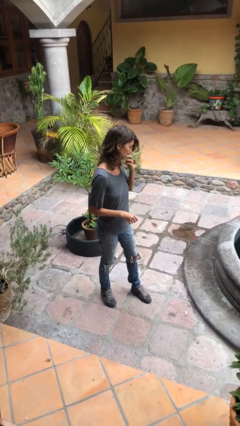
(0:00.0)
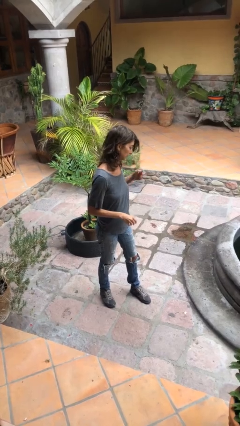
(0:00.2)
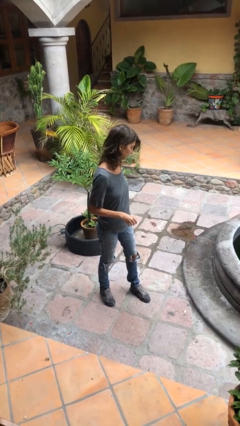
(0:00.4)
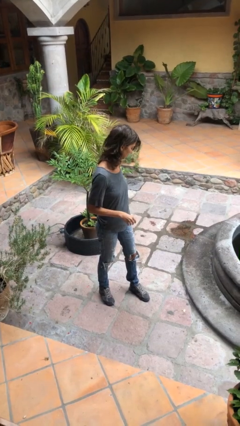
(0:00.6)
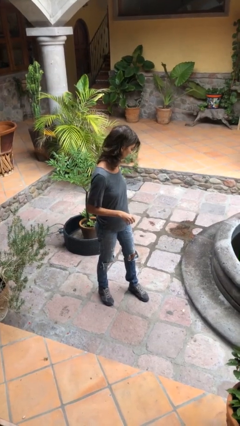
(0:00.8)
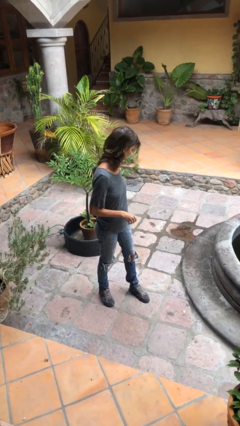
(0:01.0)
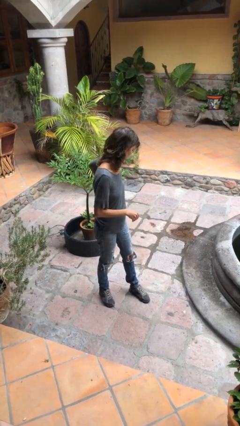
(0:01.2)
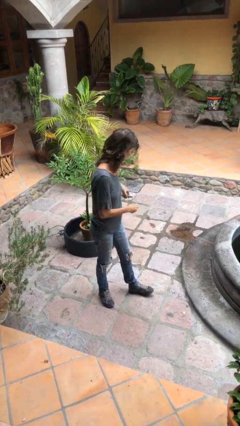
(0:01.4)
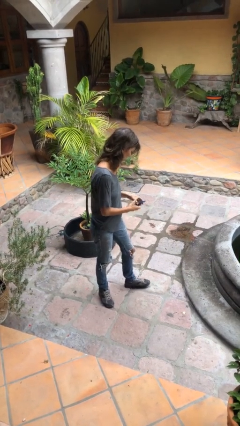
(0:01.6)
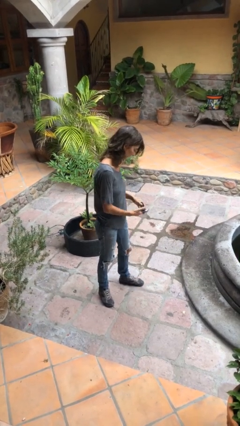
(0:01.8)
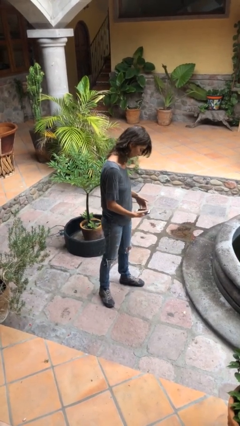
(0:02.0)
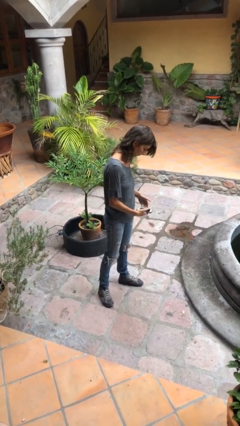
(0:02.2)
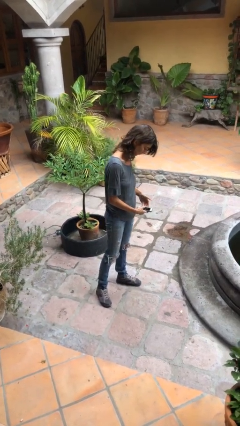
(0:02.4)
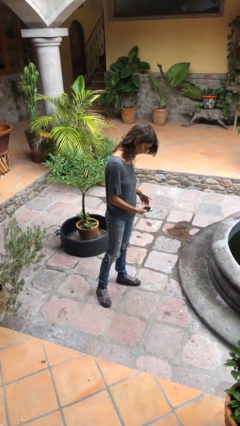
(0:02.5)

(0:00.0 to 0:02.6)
person takes phone from pocket

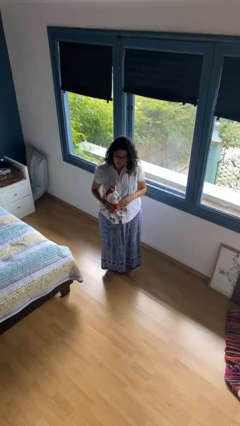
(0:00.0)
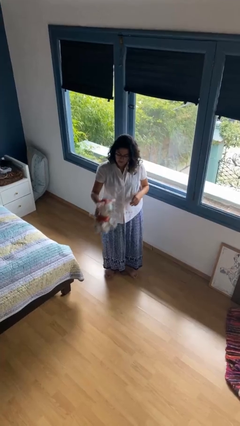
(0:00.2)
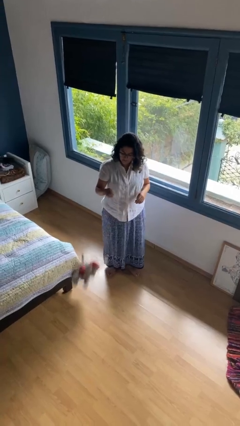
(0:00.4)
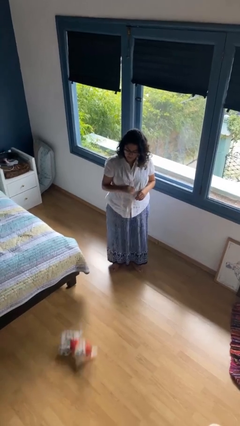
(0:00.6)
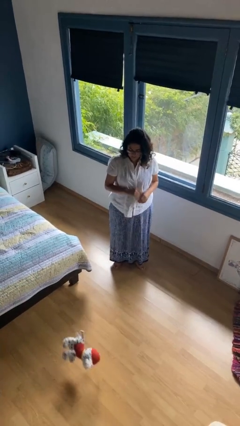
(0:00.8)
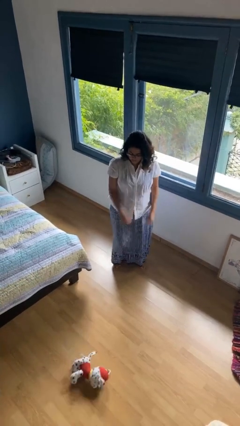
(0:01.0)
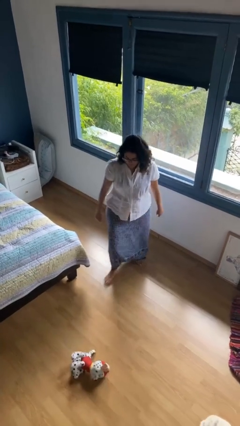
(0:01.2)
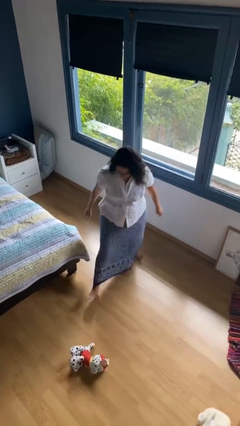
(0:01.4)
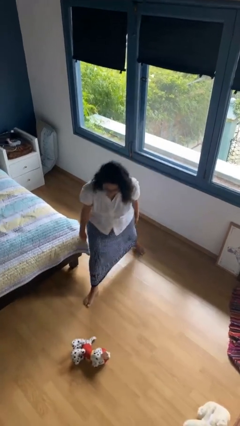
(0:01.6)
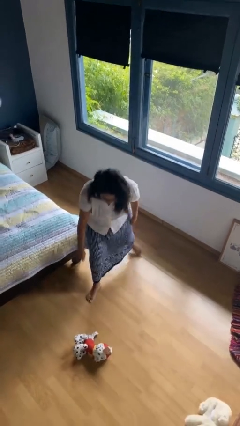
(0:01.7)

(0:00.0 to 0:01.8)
person throws object to ground

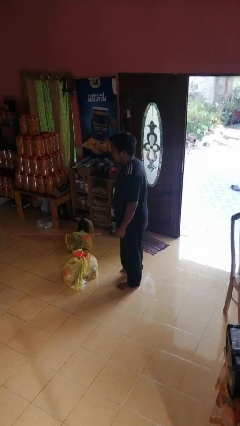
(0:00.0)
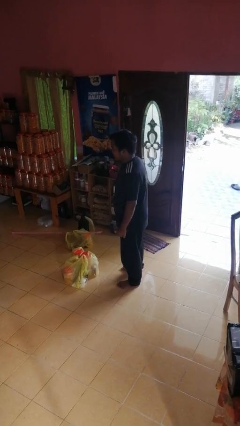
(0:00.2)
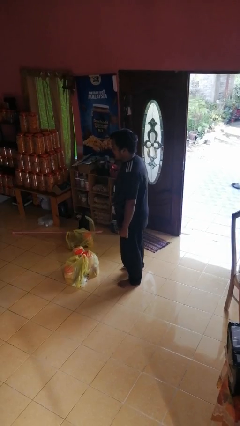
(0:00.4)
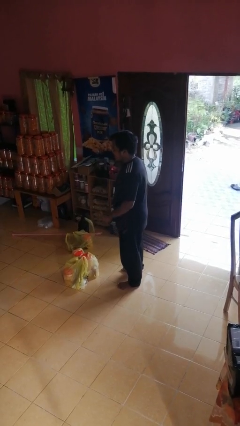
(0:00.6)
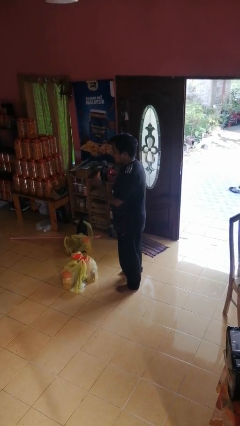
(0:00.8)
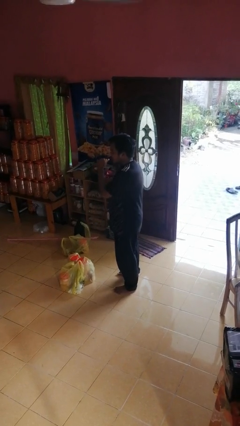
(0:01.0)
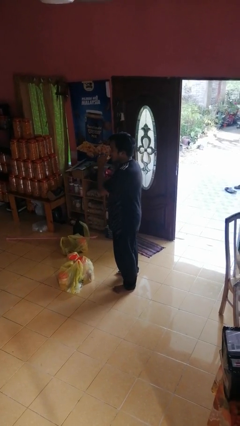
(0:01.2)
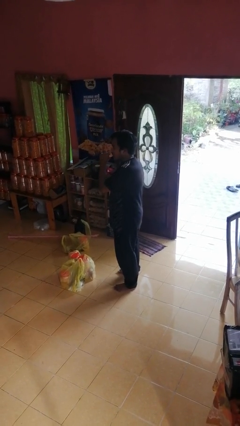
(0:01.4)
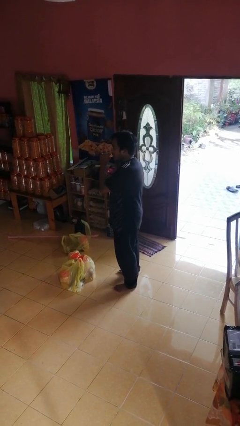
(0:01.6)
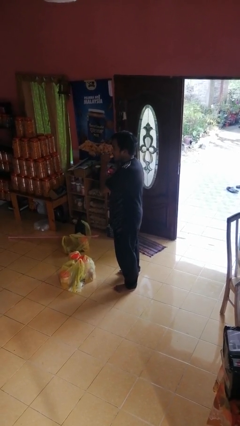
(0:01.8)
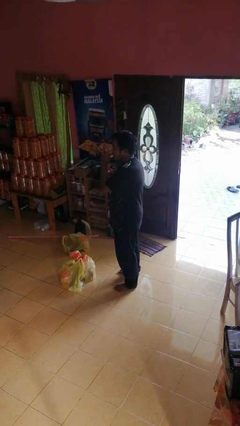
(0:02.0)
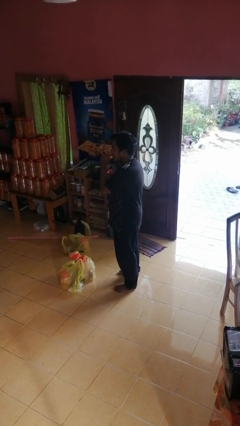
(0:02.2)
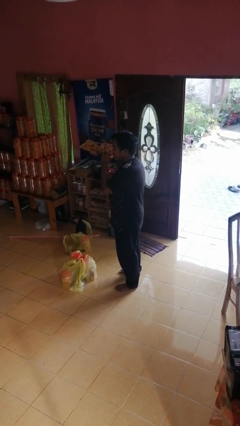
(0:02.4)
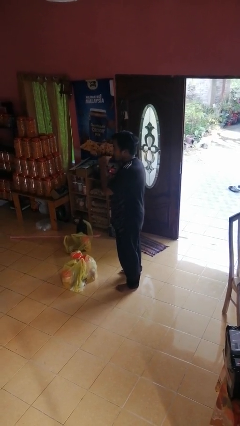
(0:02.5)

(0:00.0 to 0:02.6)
person eats banana

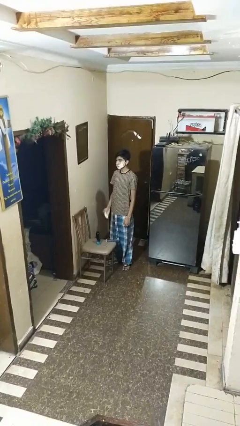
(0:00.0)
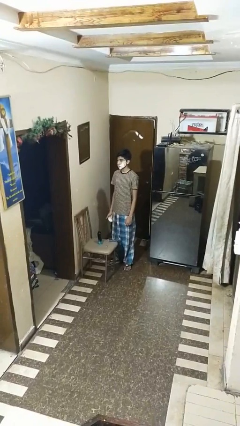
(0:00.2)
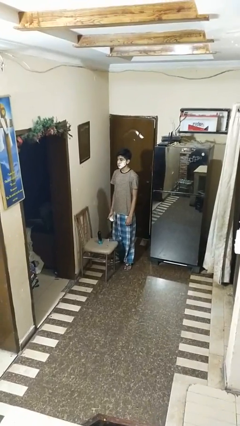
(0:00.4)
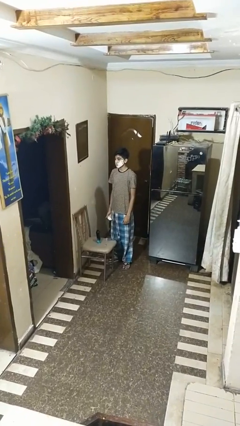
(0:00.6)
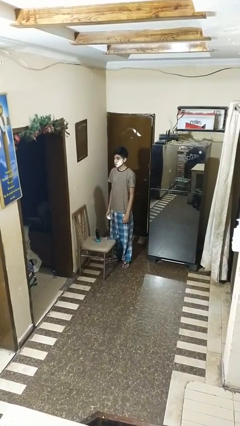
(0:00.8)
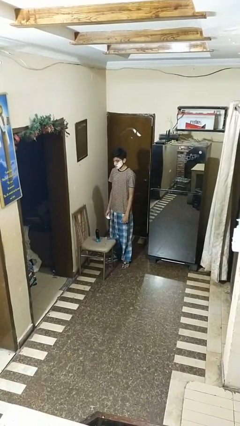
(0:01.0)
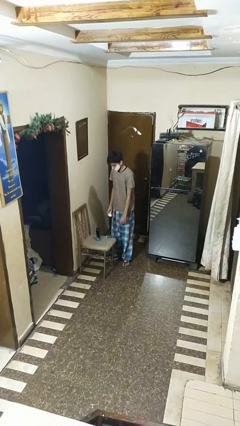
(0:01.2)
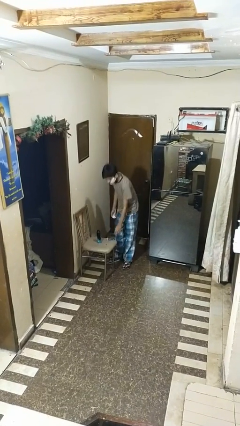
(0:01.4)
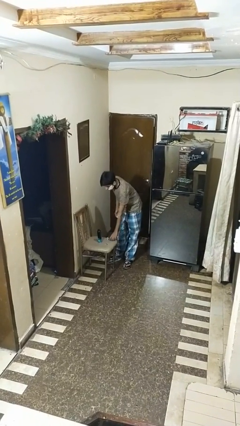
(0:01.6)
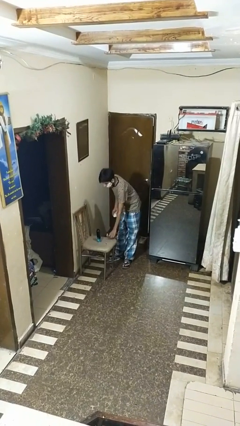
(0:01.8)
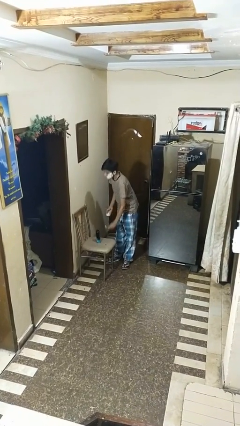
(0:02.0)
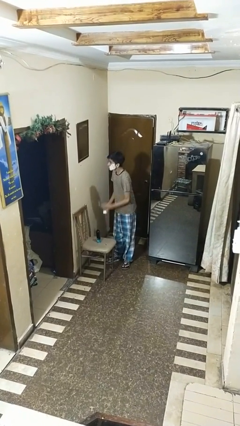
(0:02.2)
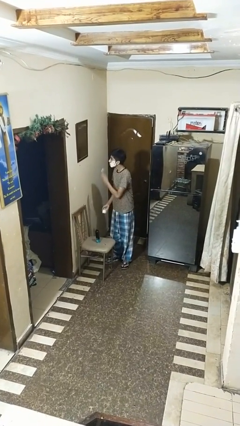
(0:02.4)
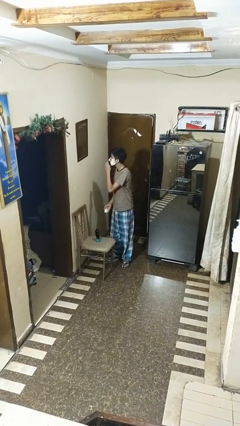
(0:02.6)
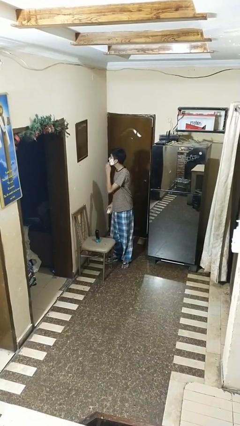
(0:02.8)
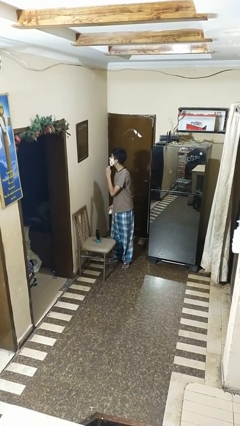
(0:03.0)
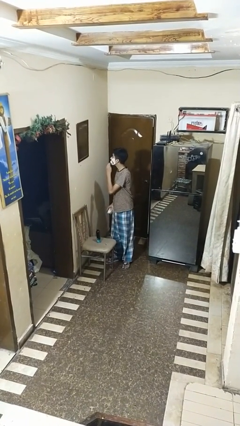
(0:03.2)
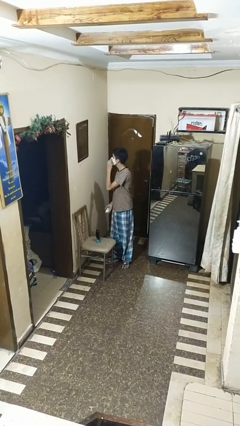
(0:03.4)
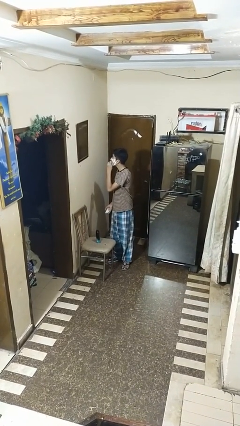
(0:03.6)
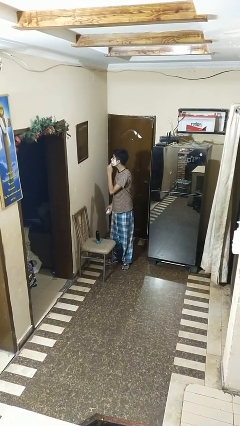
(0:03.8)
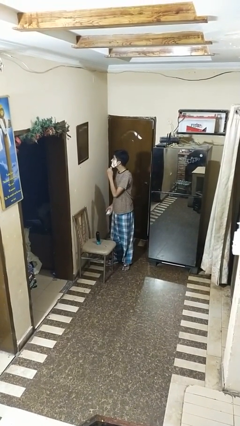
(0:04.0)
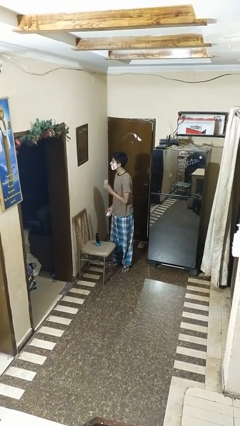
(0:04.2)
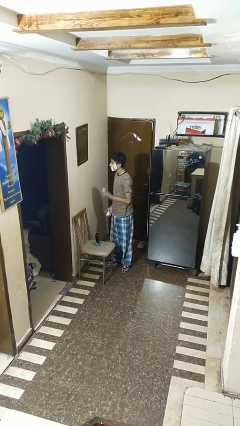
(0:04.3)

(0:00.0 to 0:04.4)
person shaves face

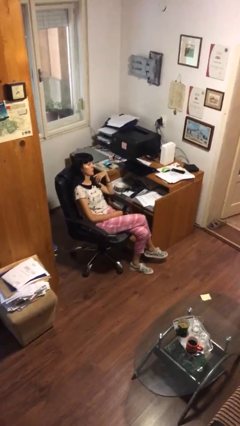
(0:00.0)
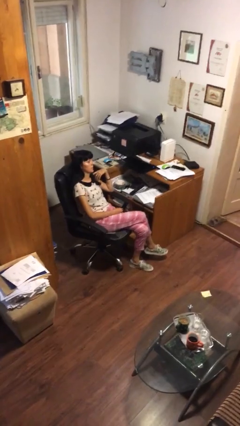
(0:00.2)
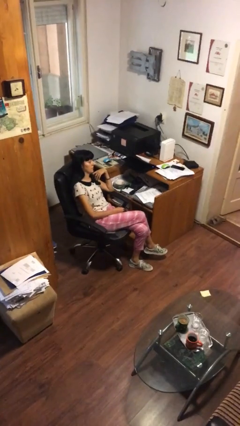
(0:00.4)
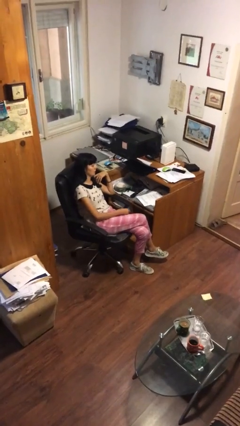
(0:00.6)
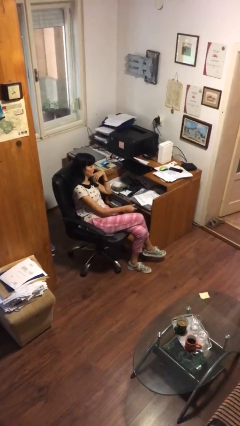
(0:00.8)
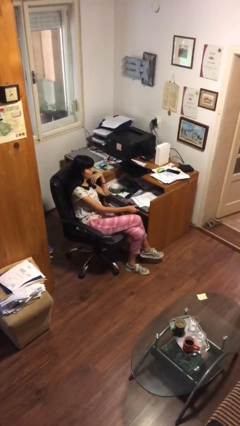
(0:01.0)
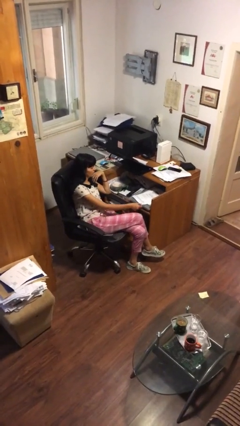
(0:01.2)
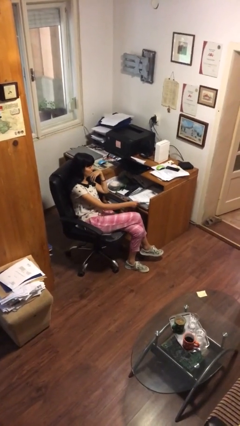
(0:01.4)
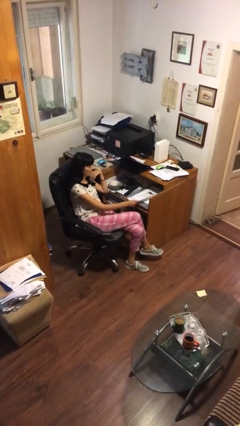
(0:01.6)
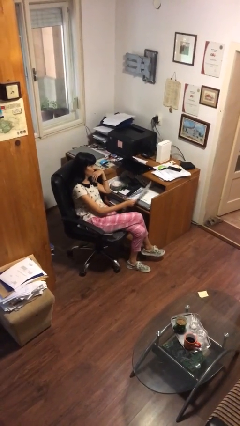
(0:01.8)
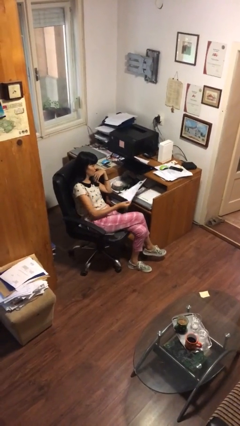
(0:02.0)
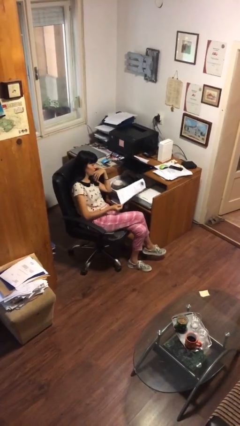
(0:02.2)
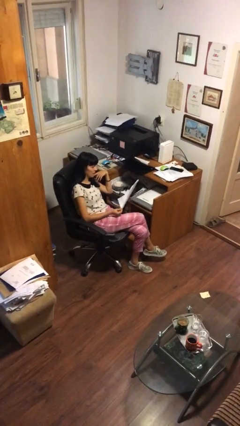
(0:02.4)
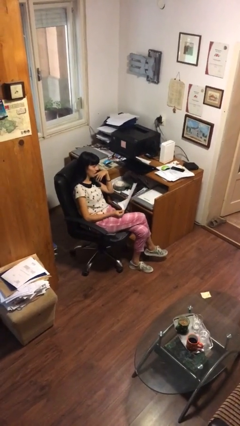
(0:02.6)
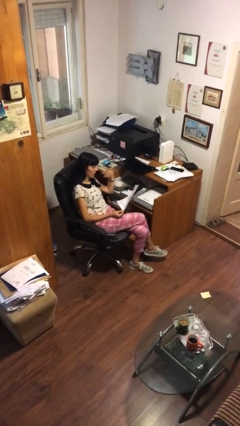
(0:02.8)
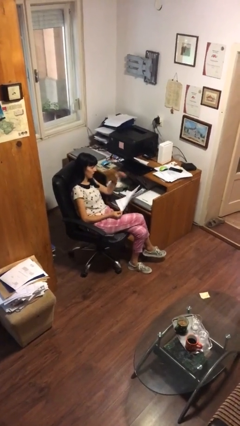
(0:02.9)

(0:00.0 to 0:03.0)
person picks up object from table

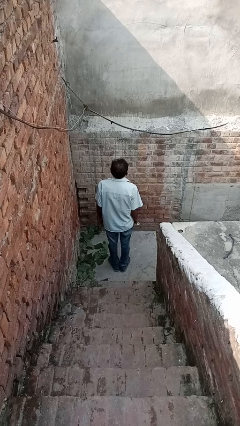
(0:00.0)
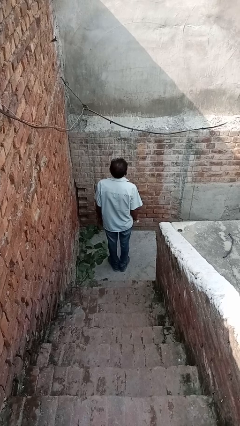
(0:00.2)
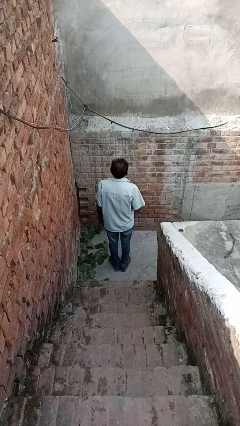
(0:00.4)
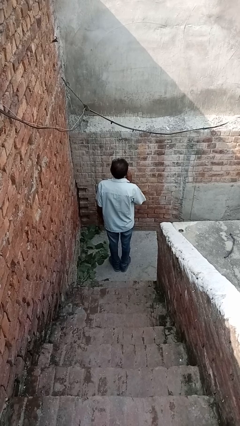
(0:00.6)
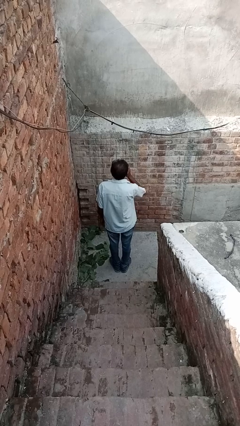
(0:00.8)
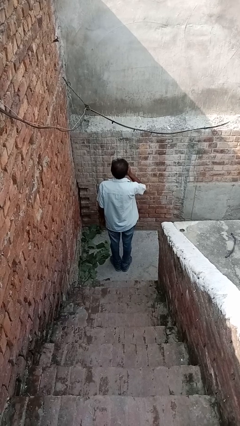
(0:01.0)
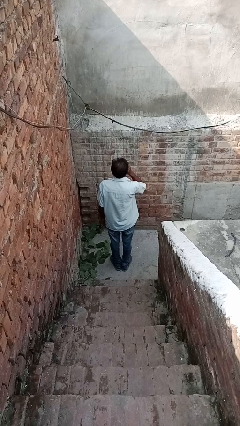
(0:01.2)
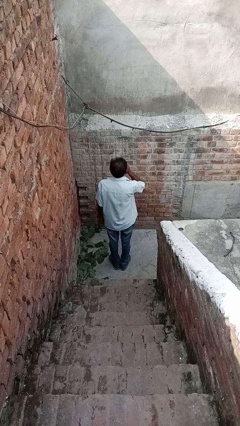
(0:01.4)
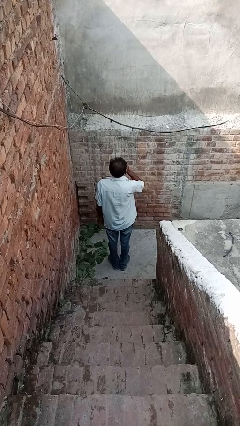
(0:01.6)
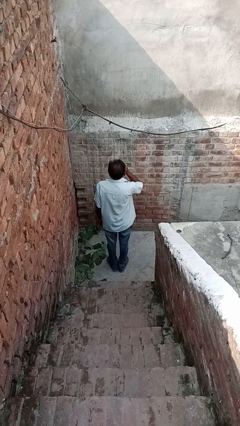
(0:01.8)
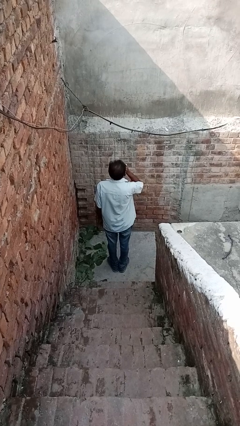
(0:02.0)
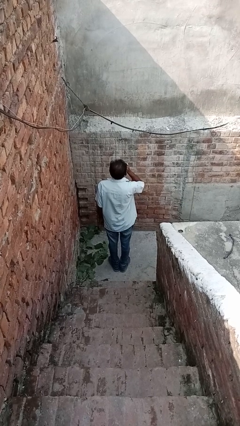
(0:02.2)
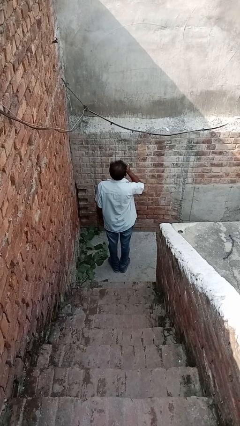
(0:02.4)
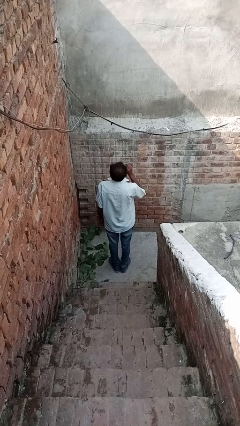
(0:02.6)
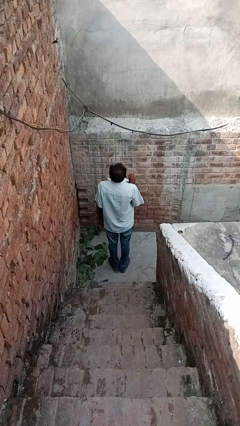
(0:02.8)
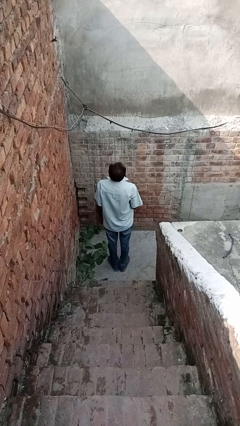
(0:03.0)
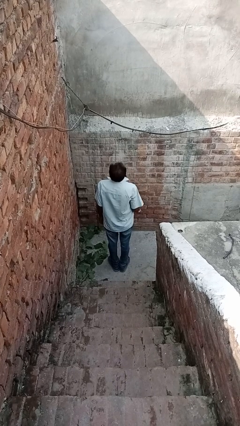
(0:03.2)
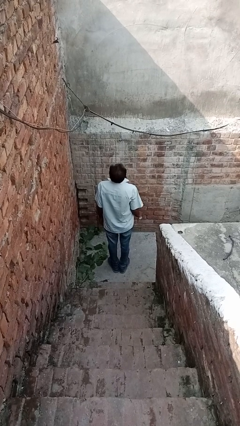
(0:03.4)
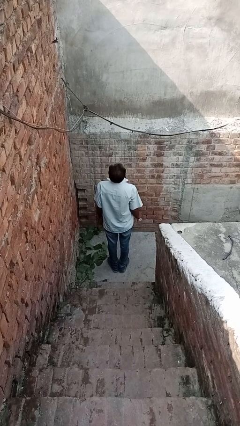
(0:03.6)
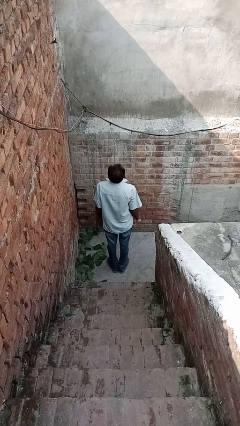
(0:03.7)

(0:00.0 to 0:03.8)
person vapes
